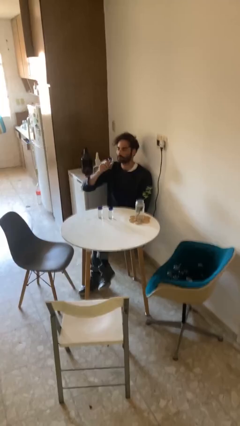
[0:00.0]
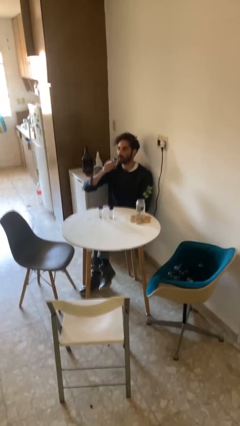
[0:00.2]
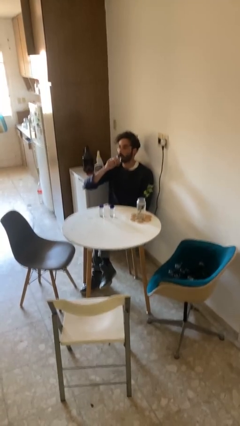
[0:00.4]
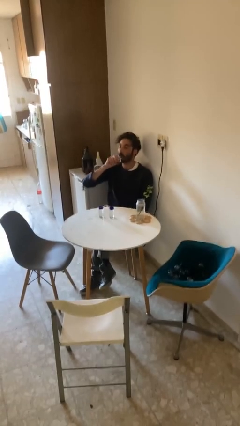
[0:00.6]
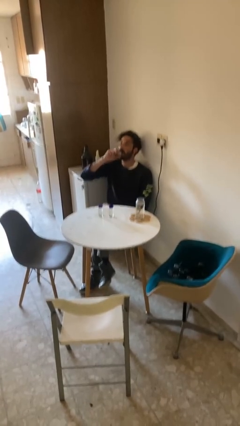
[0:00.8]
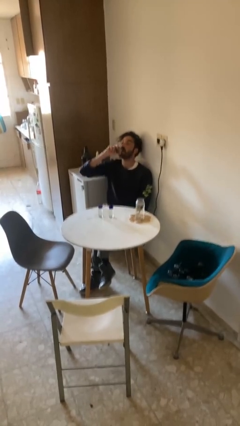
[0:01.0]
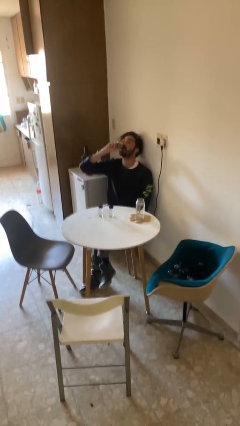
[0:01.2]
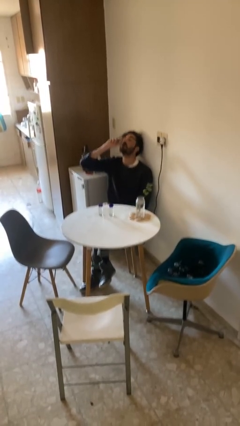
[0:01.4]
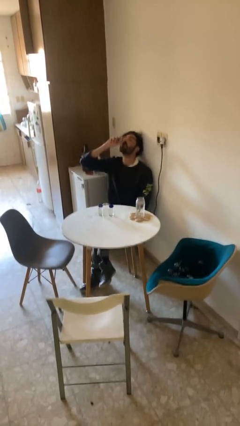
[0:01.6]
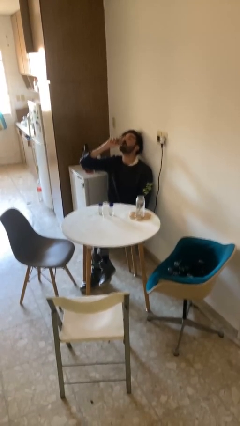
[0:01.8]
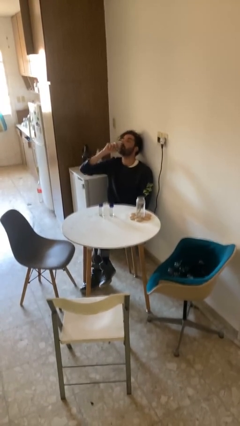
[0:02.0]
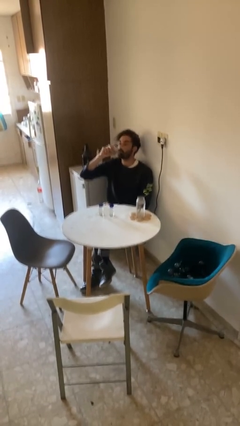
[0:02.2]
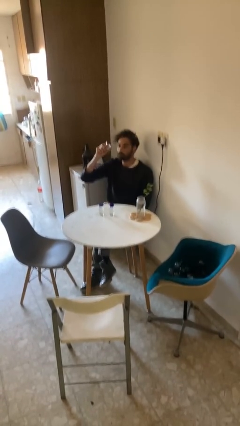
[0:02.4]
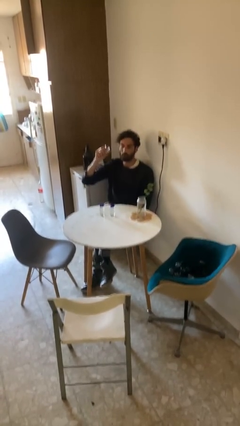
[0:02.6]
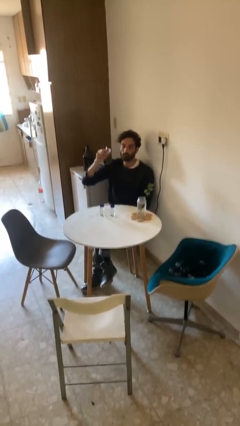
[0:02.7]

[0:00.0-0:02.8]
person drinks from shotglass

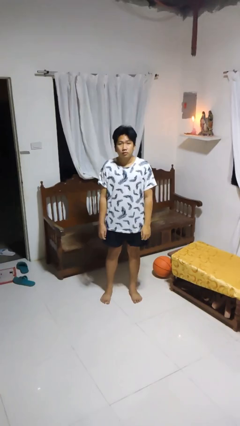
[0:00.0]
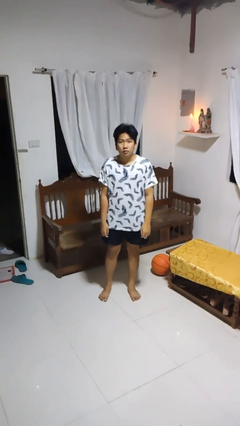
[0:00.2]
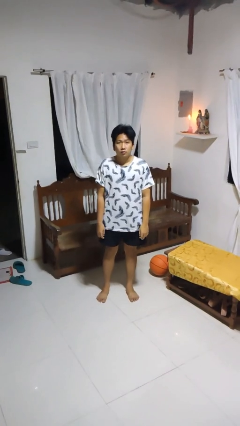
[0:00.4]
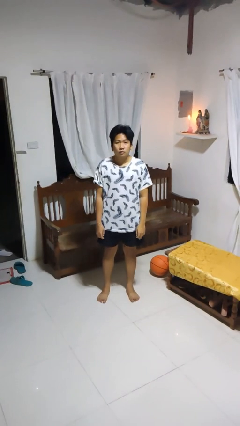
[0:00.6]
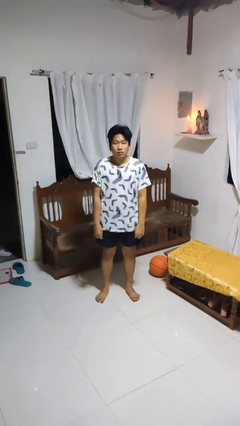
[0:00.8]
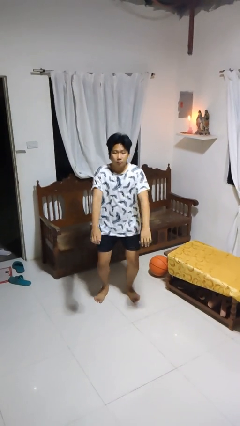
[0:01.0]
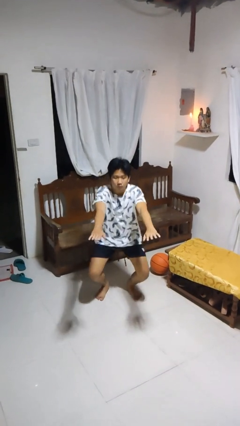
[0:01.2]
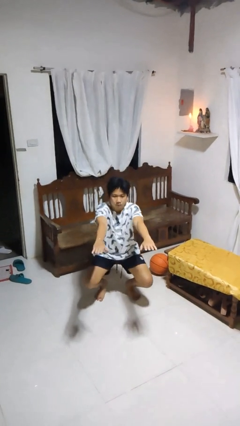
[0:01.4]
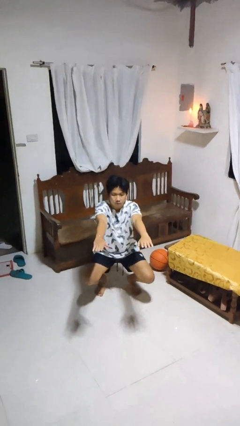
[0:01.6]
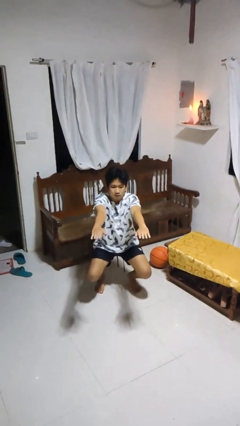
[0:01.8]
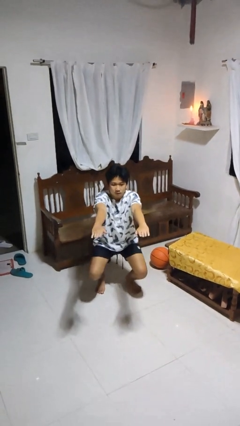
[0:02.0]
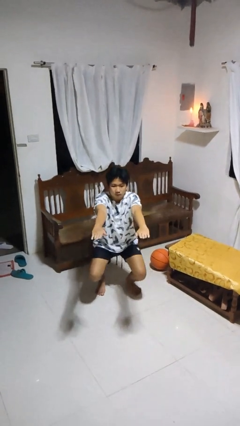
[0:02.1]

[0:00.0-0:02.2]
person squats

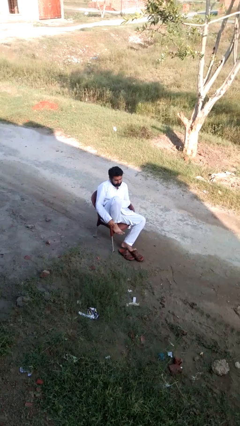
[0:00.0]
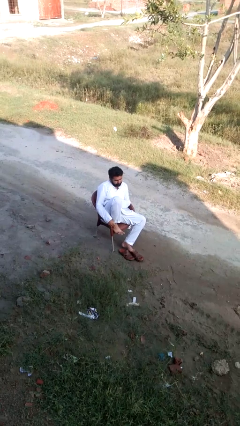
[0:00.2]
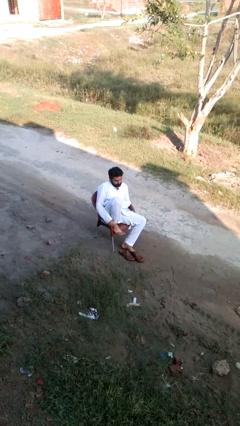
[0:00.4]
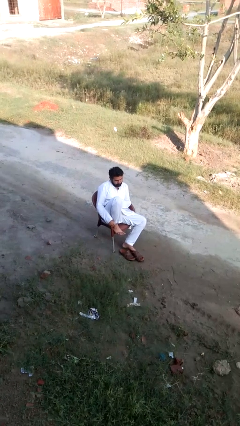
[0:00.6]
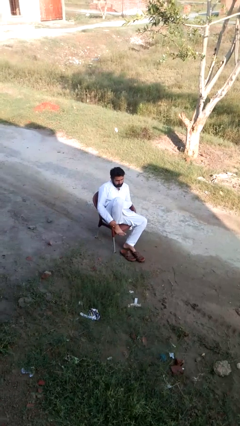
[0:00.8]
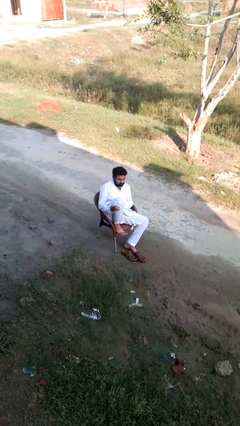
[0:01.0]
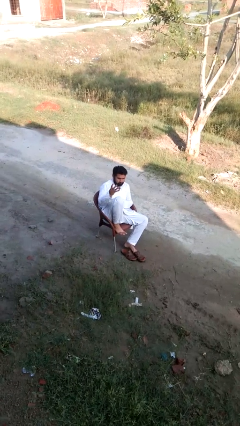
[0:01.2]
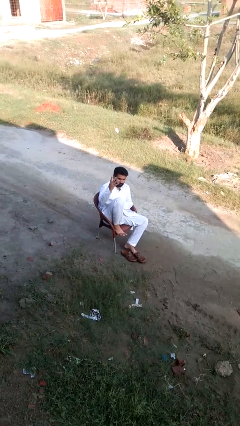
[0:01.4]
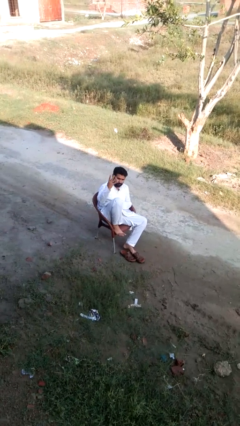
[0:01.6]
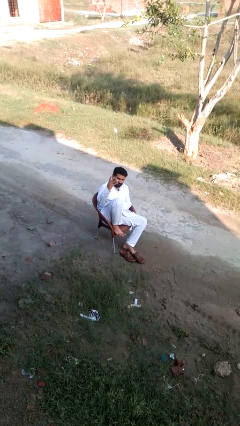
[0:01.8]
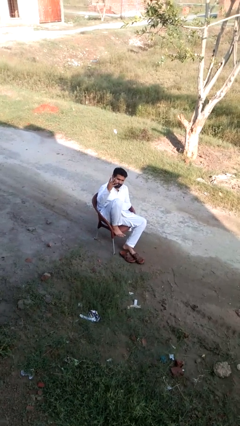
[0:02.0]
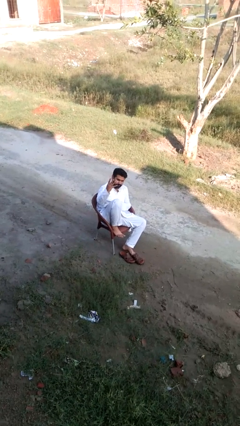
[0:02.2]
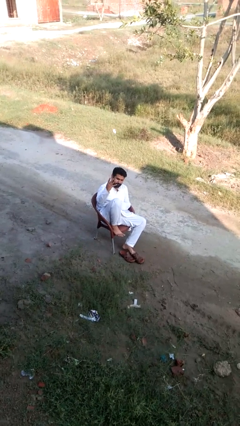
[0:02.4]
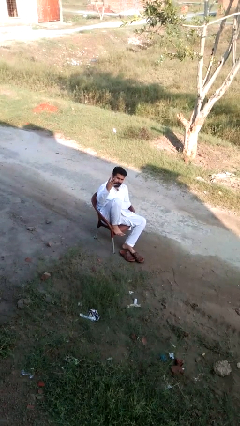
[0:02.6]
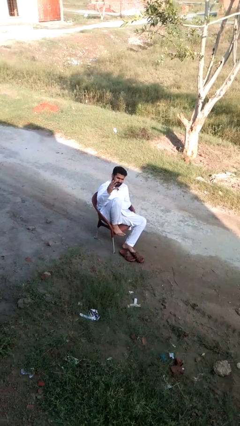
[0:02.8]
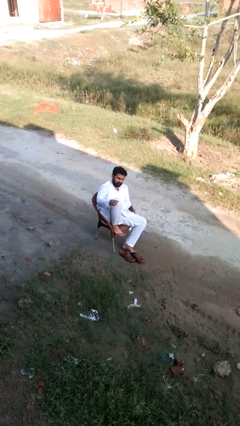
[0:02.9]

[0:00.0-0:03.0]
person gestures number four

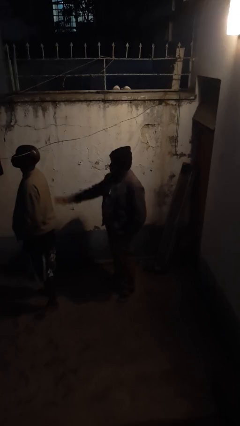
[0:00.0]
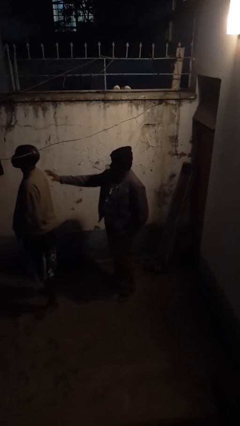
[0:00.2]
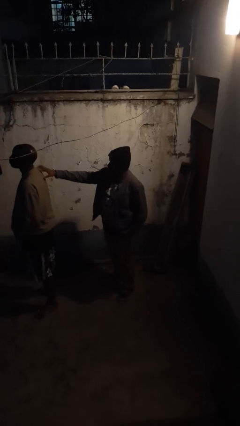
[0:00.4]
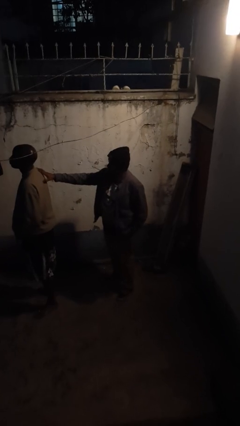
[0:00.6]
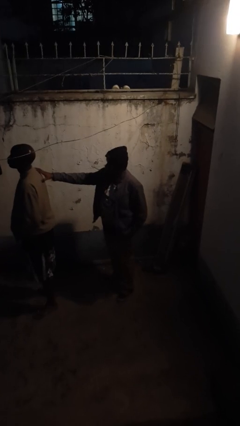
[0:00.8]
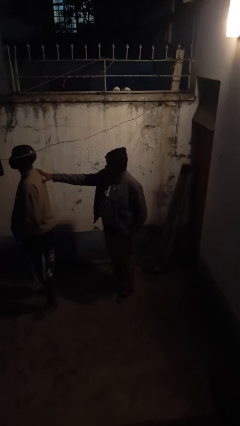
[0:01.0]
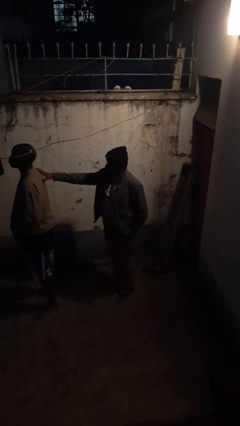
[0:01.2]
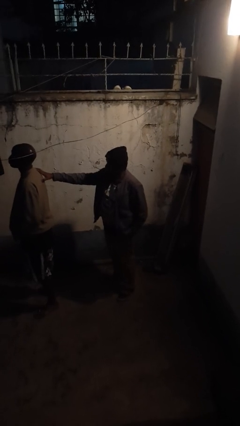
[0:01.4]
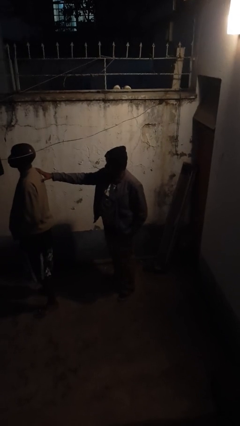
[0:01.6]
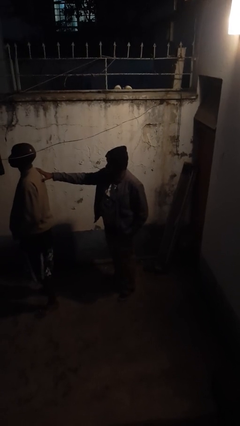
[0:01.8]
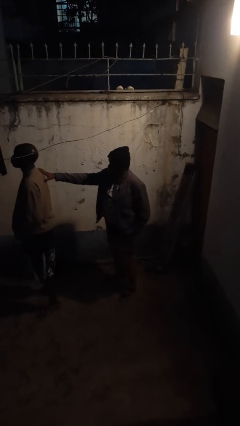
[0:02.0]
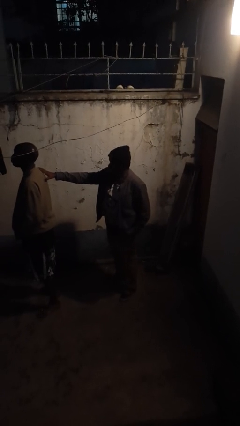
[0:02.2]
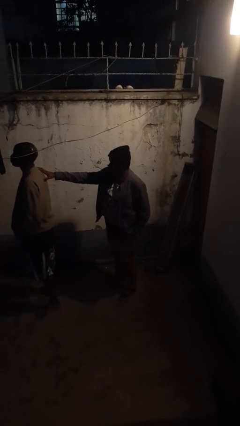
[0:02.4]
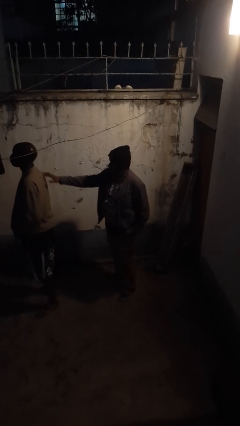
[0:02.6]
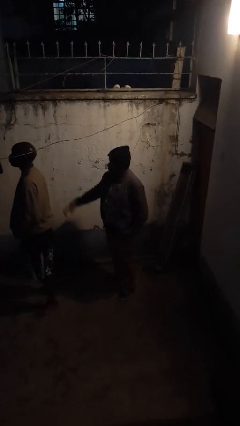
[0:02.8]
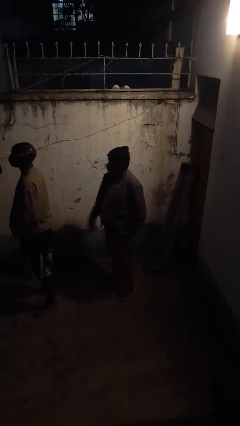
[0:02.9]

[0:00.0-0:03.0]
person touches back of person

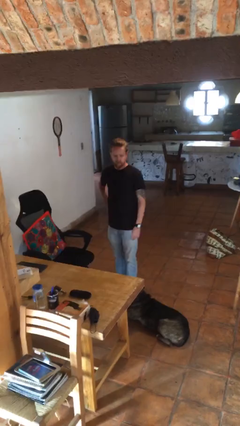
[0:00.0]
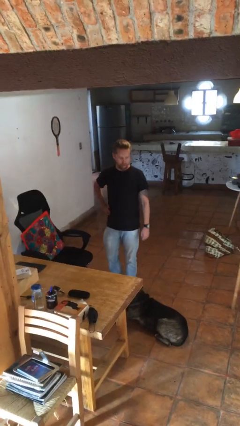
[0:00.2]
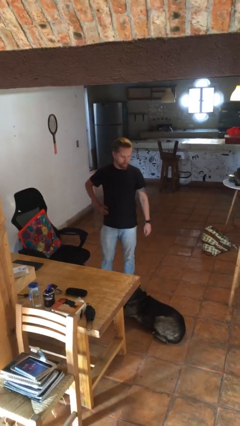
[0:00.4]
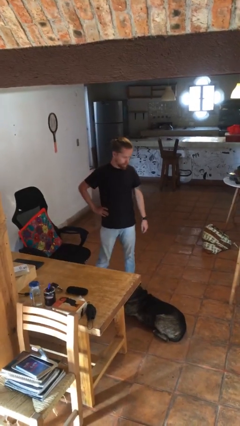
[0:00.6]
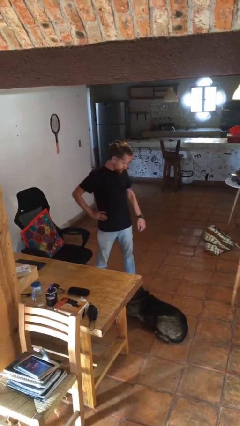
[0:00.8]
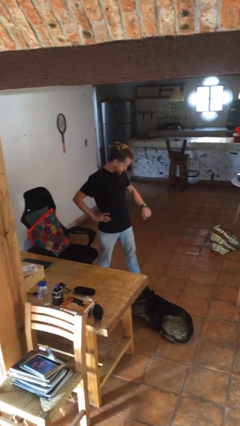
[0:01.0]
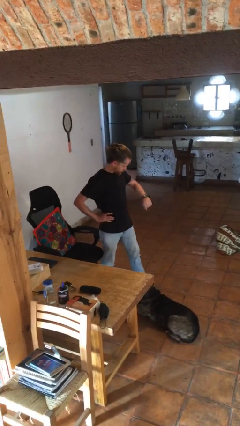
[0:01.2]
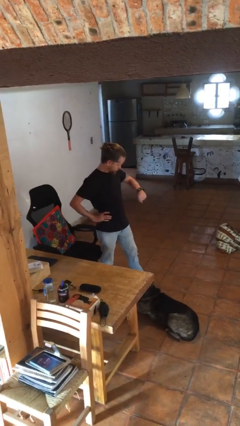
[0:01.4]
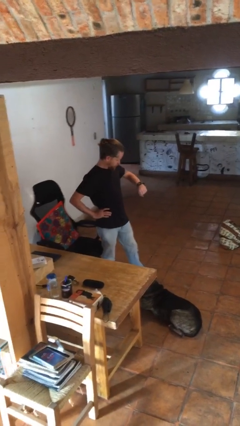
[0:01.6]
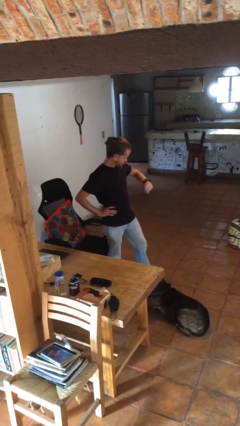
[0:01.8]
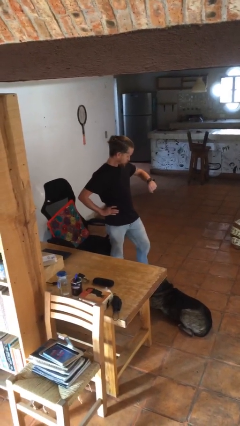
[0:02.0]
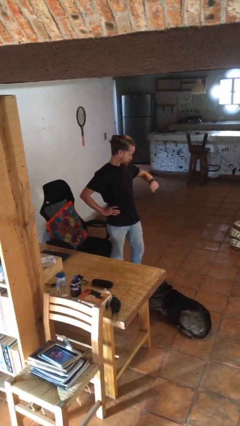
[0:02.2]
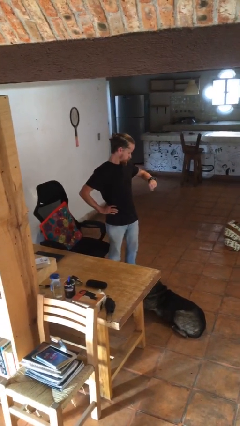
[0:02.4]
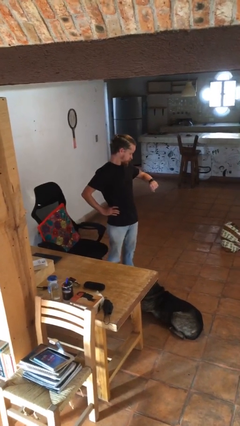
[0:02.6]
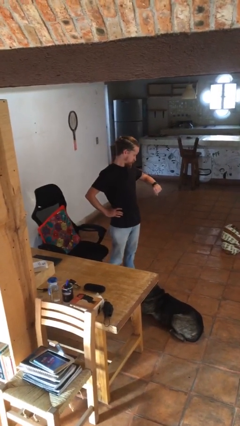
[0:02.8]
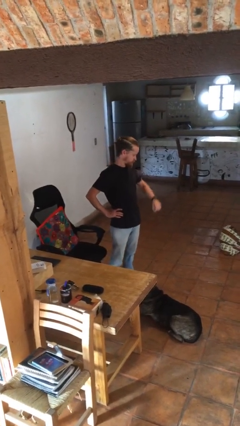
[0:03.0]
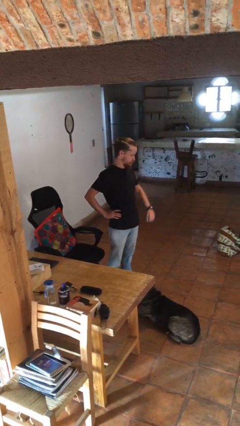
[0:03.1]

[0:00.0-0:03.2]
person looks at wristwatch

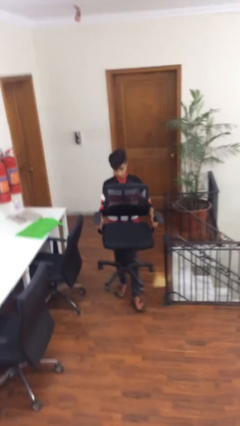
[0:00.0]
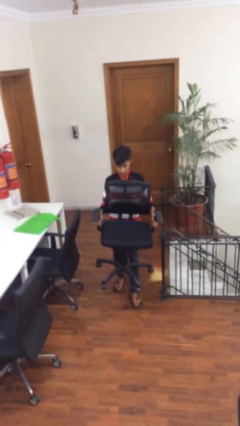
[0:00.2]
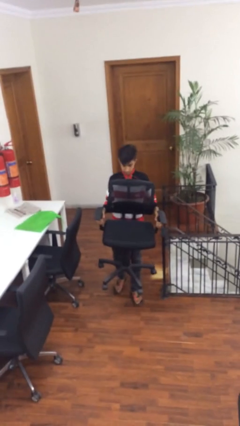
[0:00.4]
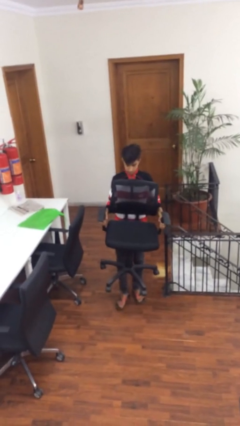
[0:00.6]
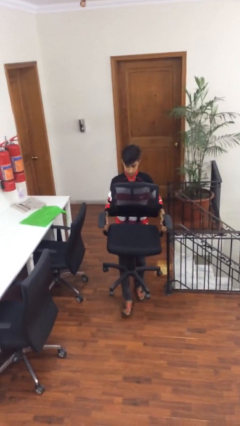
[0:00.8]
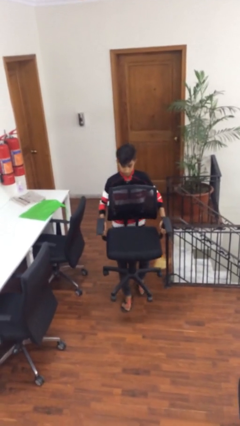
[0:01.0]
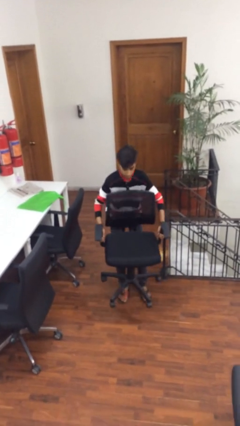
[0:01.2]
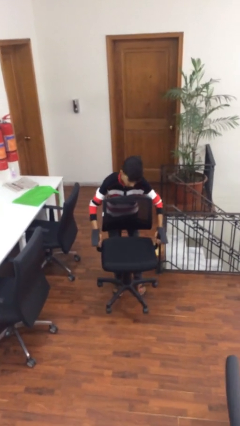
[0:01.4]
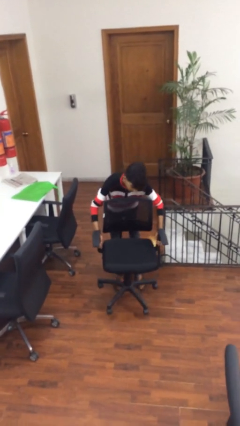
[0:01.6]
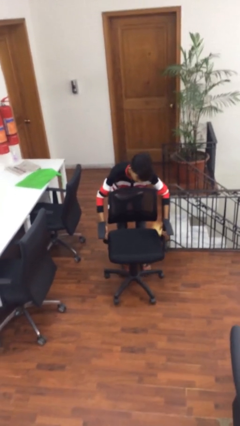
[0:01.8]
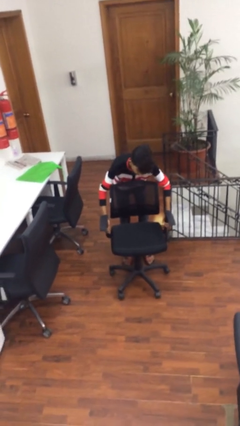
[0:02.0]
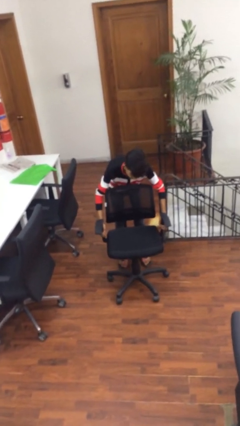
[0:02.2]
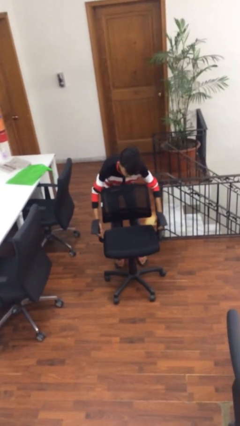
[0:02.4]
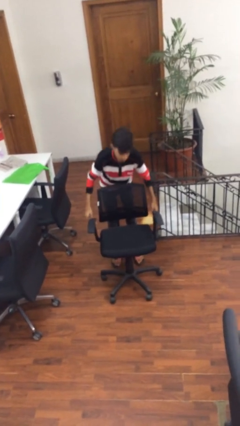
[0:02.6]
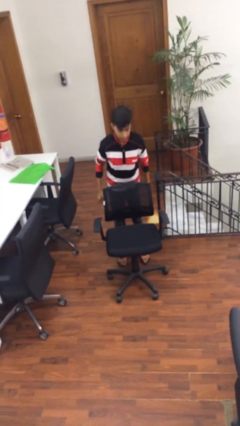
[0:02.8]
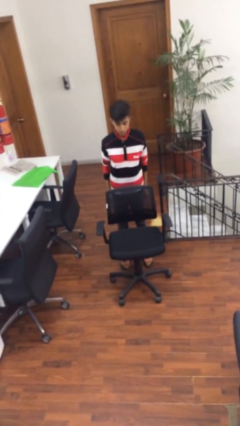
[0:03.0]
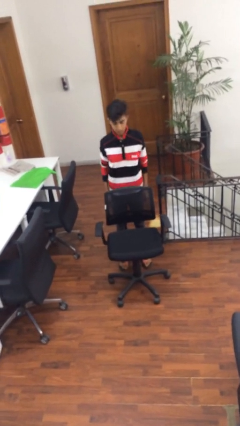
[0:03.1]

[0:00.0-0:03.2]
person puts down object on floor
